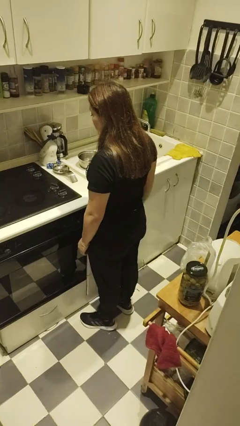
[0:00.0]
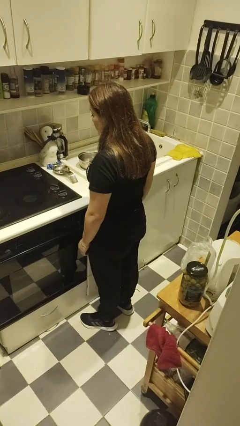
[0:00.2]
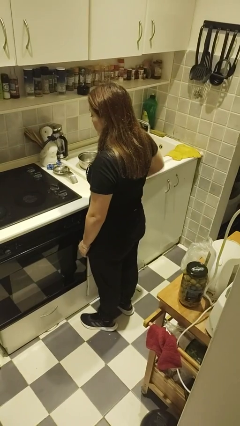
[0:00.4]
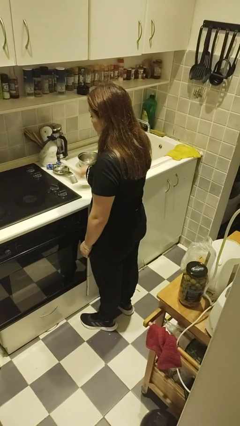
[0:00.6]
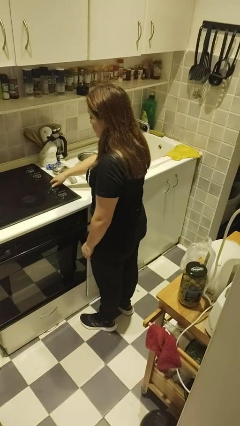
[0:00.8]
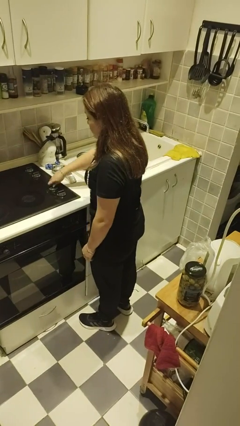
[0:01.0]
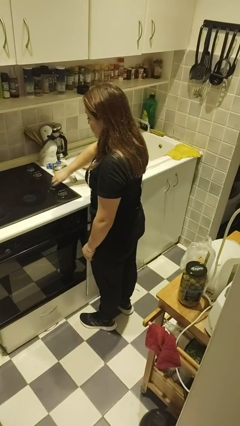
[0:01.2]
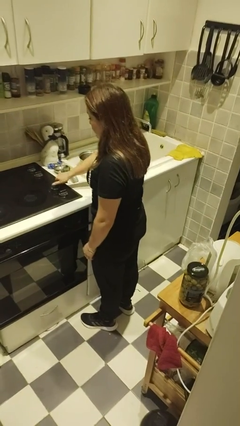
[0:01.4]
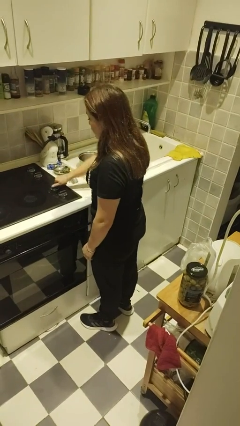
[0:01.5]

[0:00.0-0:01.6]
person turns off stovetop

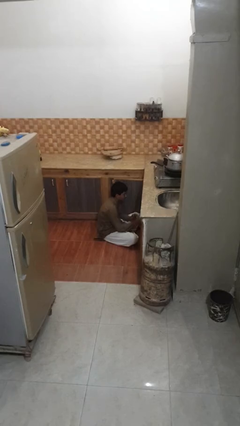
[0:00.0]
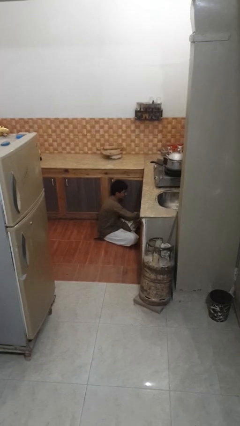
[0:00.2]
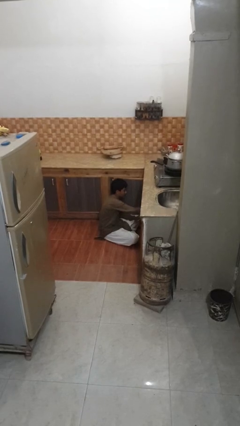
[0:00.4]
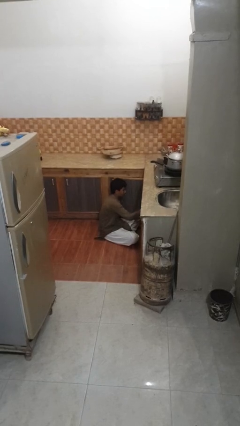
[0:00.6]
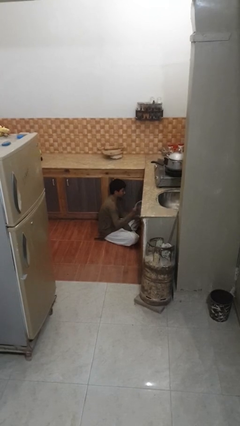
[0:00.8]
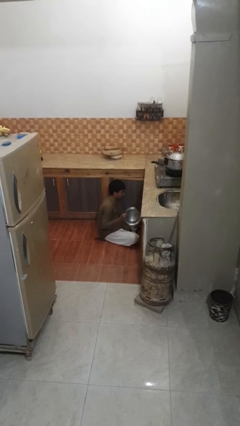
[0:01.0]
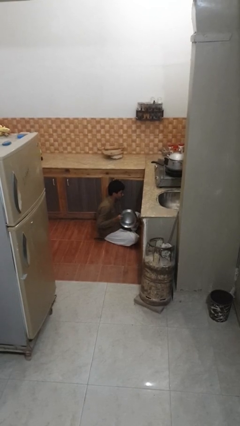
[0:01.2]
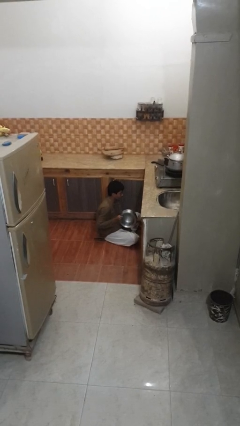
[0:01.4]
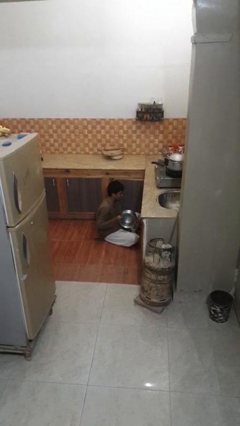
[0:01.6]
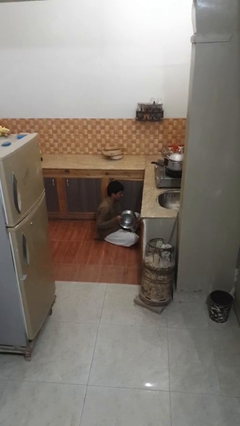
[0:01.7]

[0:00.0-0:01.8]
person takes object from kitchen drawer

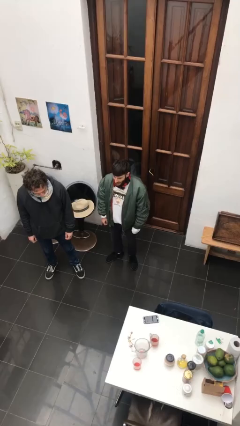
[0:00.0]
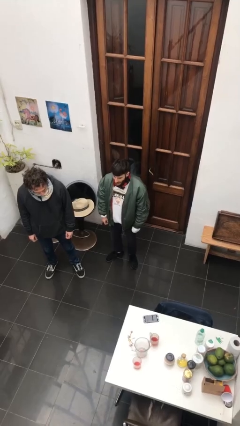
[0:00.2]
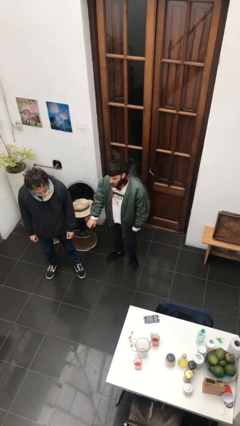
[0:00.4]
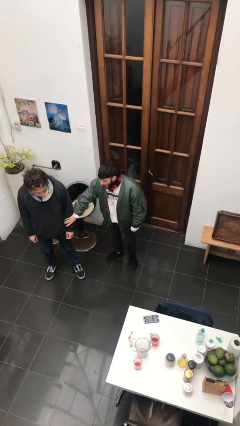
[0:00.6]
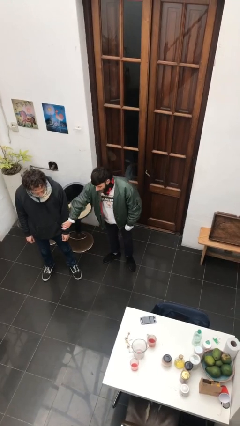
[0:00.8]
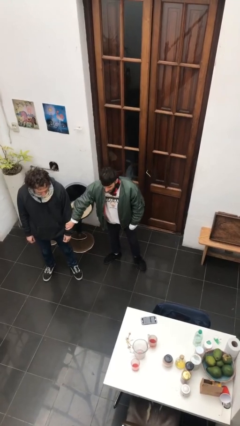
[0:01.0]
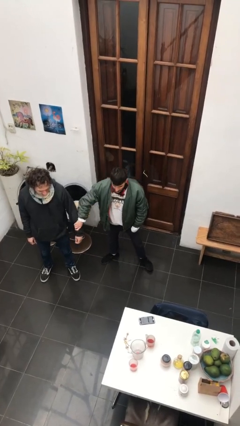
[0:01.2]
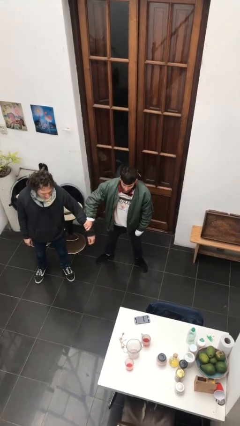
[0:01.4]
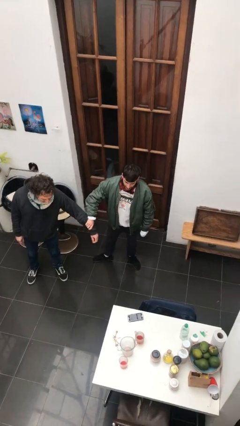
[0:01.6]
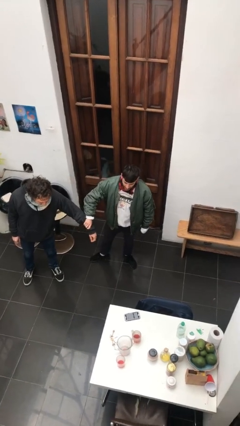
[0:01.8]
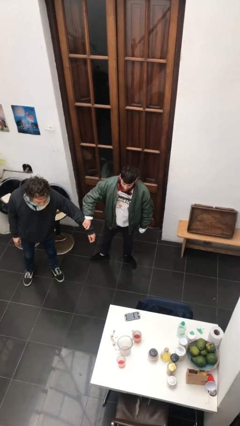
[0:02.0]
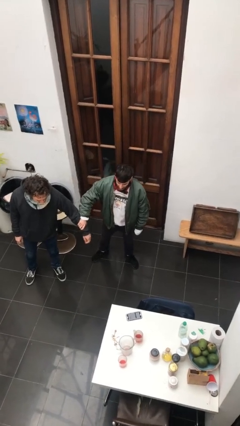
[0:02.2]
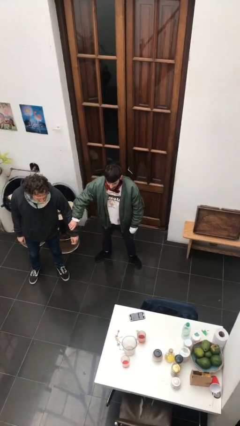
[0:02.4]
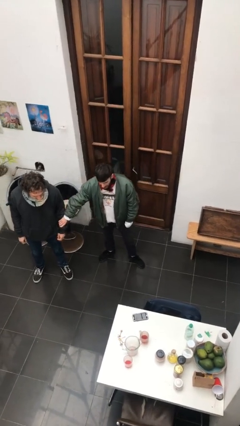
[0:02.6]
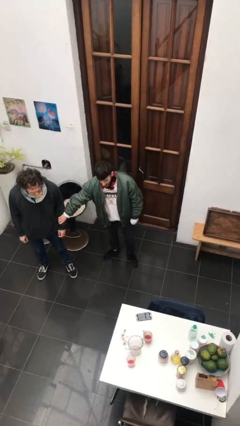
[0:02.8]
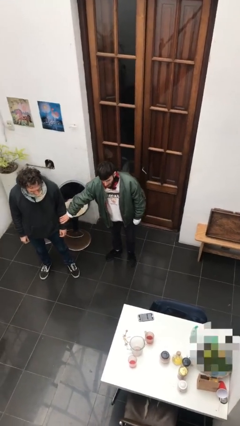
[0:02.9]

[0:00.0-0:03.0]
person grabs person by forearm

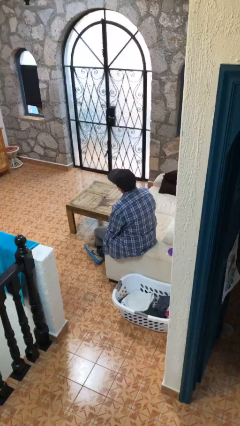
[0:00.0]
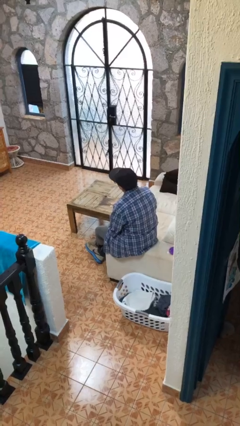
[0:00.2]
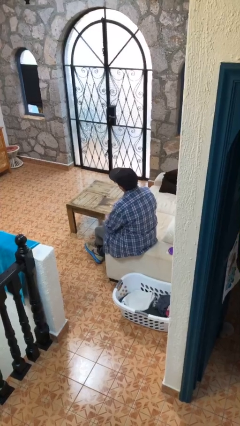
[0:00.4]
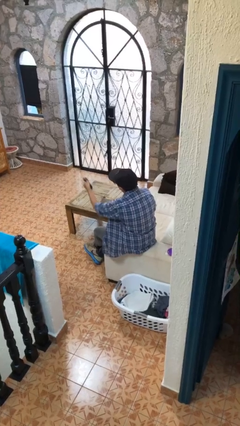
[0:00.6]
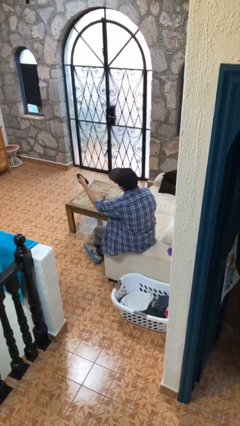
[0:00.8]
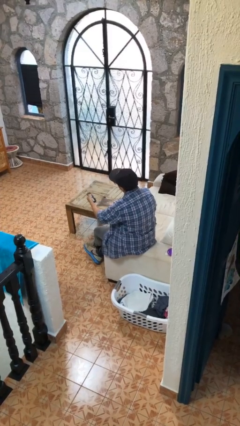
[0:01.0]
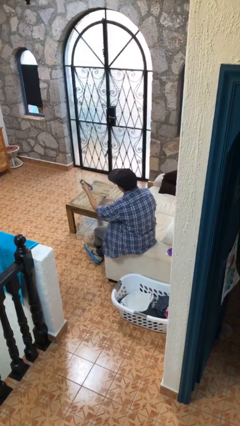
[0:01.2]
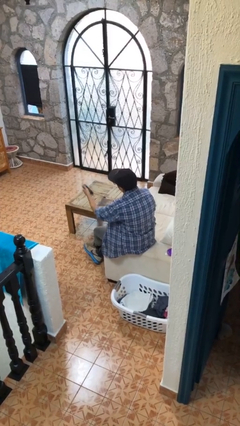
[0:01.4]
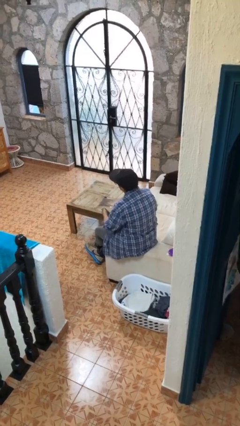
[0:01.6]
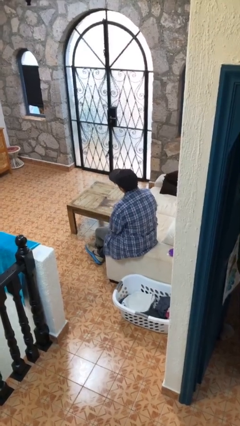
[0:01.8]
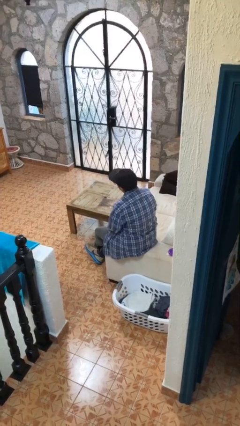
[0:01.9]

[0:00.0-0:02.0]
person uses television remote

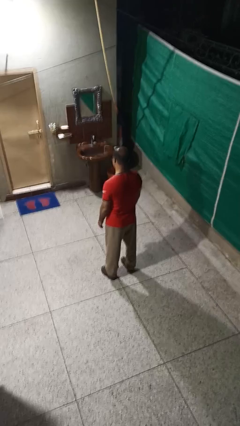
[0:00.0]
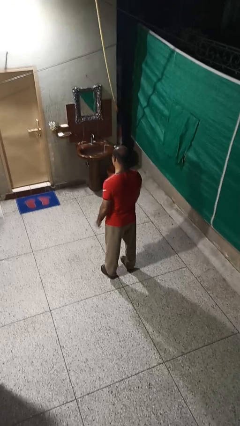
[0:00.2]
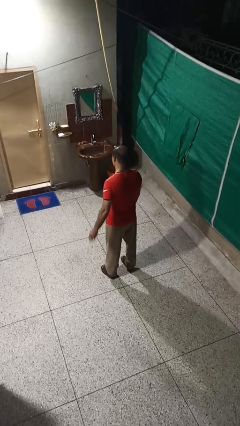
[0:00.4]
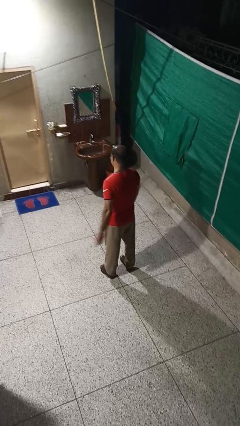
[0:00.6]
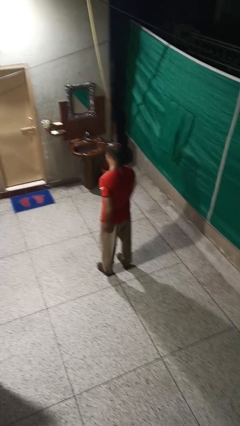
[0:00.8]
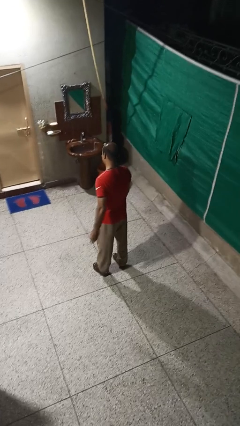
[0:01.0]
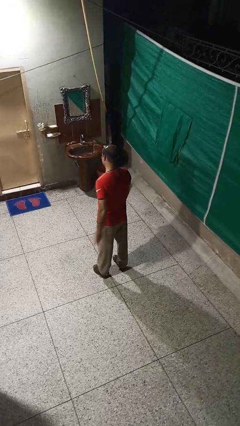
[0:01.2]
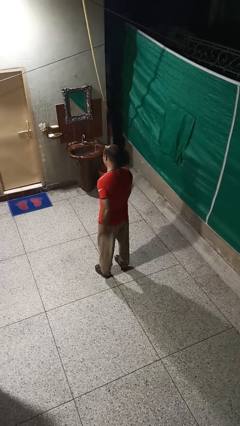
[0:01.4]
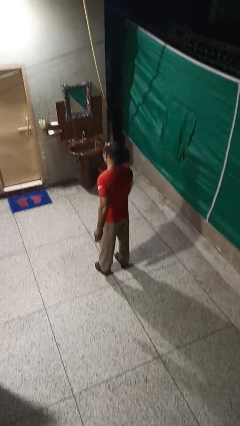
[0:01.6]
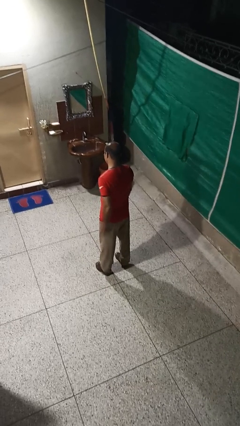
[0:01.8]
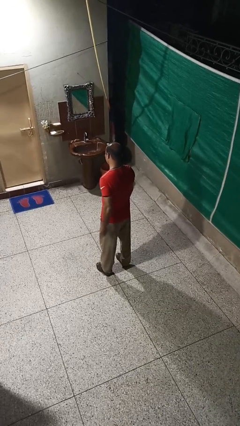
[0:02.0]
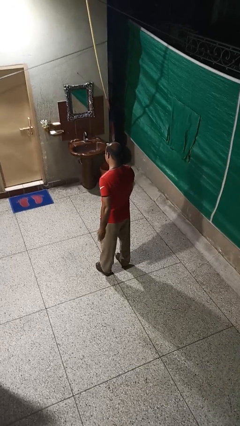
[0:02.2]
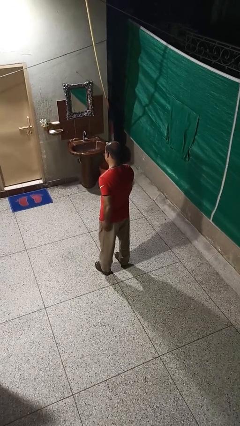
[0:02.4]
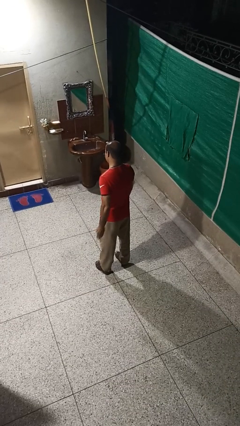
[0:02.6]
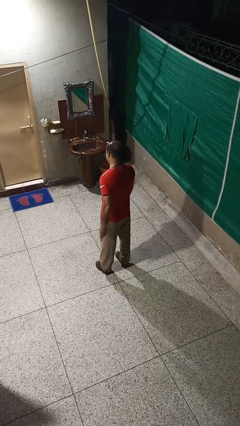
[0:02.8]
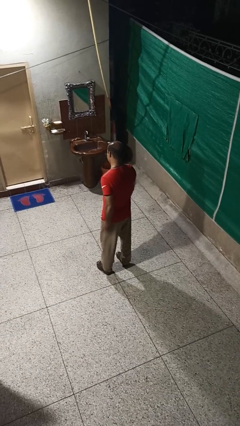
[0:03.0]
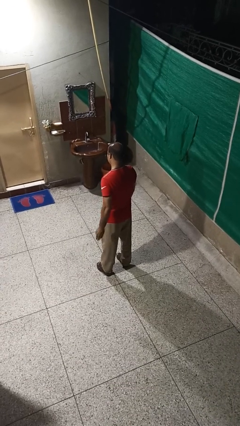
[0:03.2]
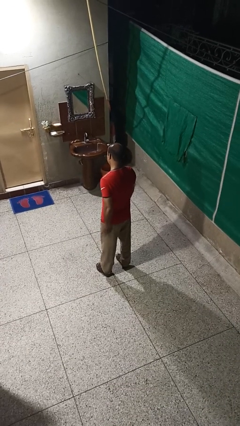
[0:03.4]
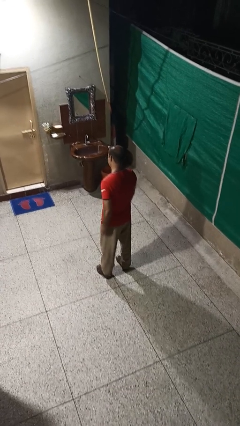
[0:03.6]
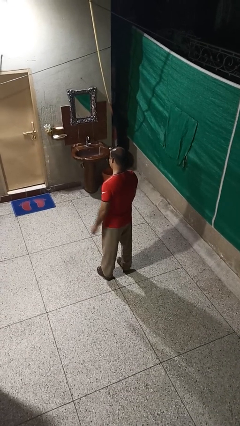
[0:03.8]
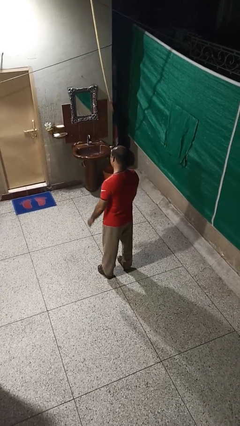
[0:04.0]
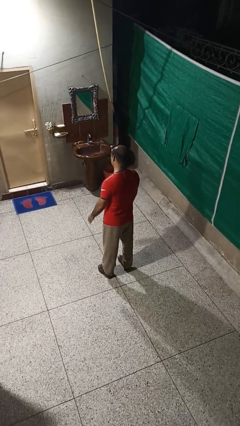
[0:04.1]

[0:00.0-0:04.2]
person slaps hands on thighs

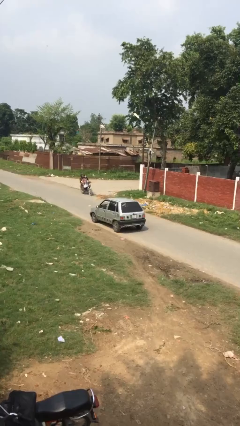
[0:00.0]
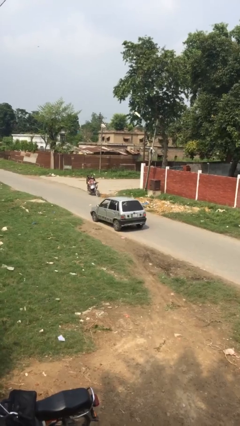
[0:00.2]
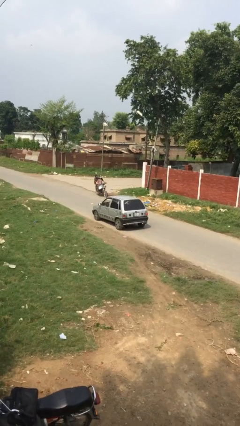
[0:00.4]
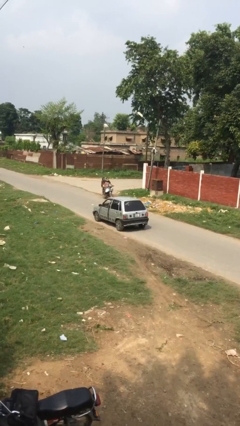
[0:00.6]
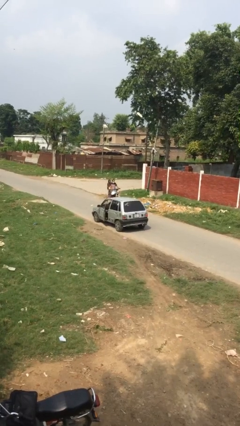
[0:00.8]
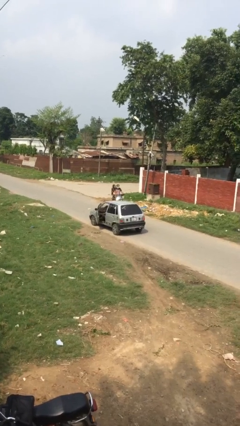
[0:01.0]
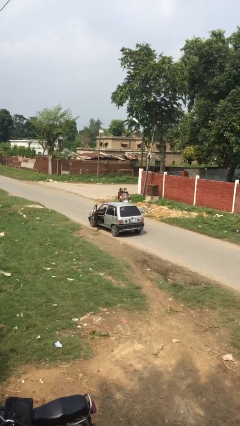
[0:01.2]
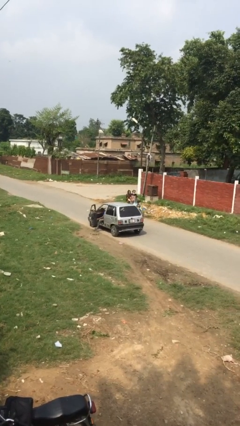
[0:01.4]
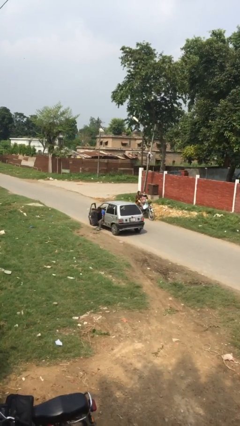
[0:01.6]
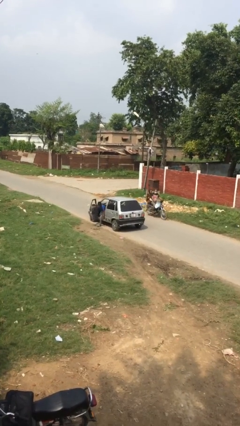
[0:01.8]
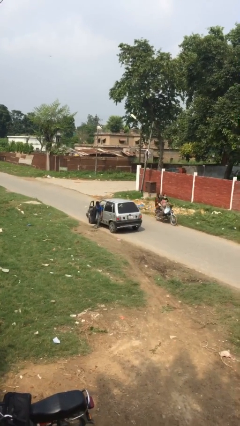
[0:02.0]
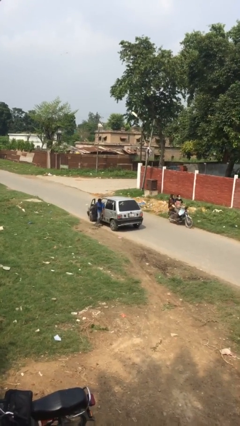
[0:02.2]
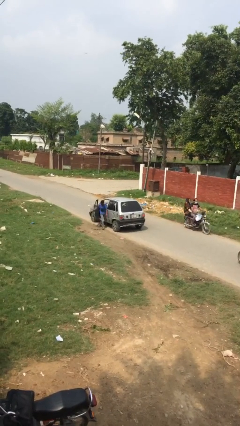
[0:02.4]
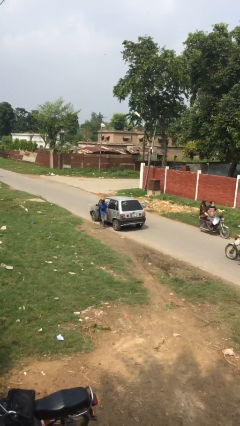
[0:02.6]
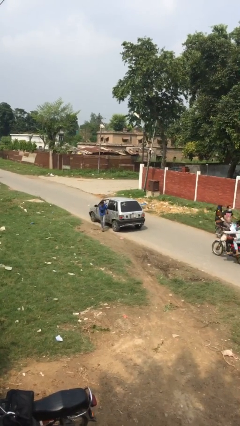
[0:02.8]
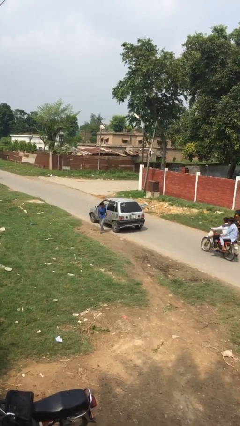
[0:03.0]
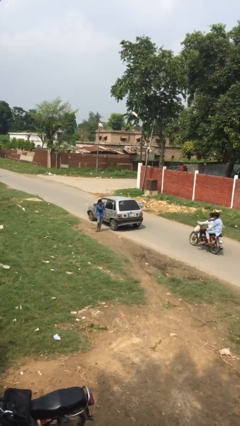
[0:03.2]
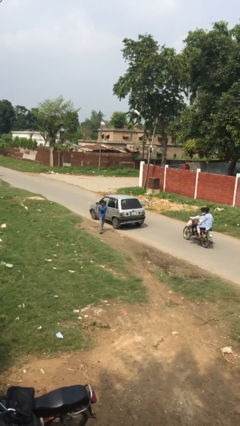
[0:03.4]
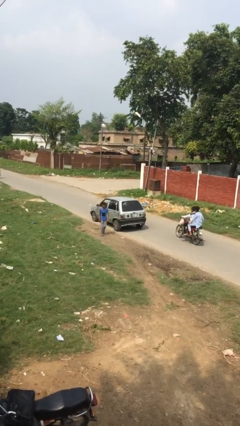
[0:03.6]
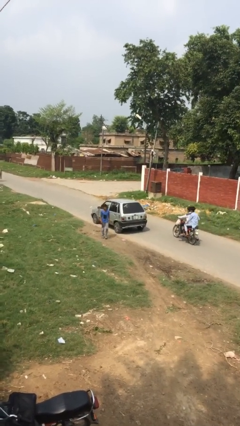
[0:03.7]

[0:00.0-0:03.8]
car drops off person

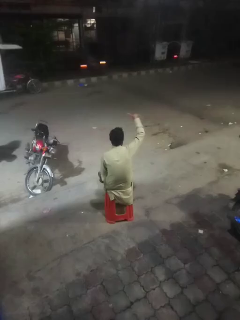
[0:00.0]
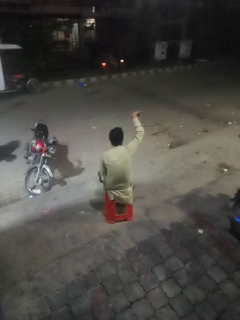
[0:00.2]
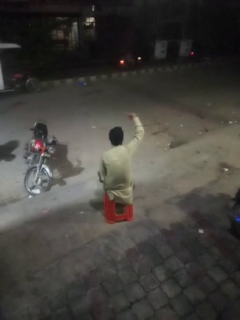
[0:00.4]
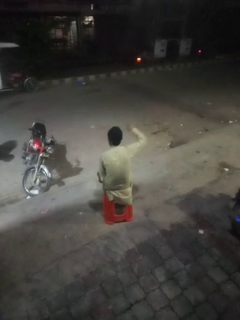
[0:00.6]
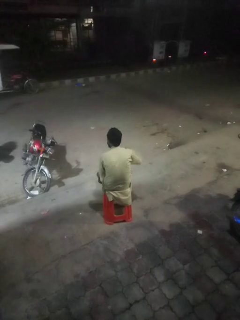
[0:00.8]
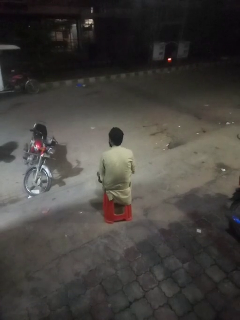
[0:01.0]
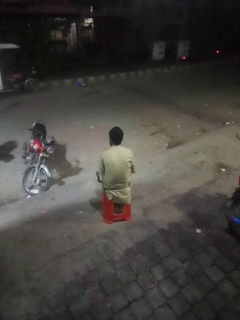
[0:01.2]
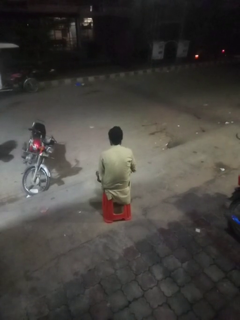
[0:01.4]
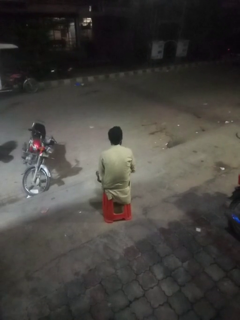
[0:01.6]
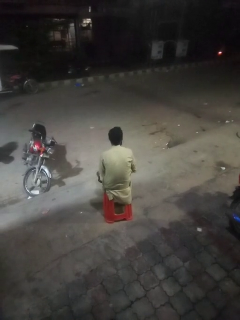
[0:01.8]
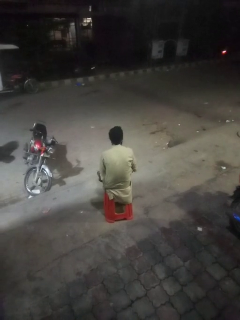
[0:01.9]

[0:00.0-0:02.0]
person gestures hang loose
